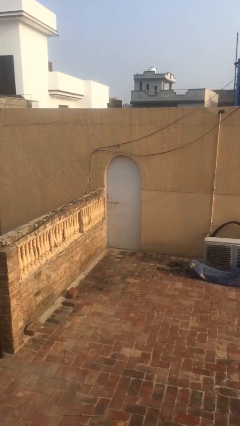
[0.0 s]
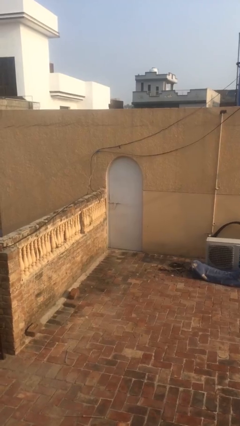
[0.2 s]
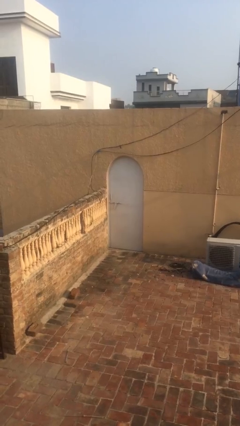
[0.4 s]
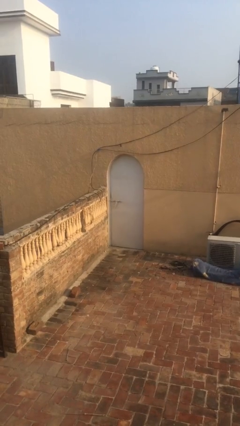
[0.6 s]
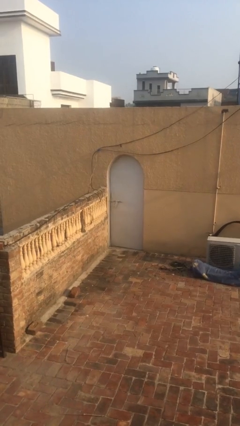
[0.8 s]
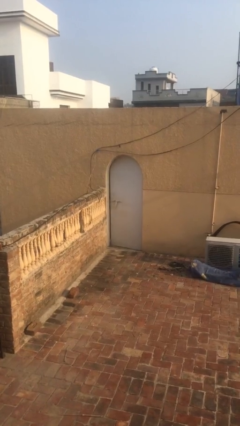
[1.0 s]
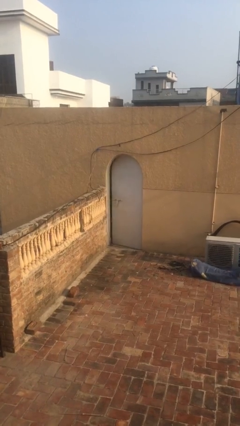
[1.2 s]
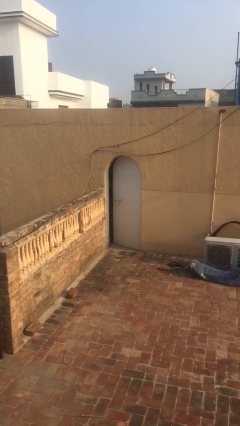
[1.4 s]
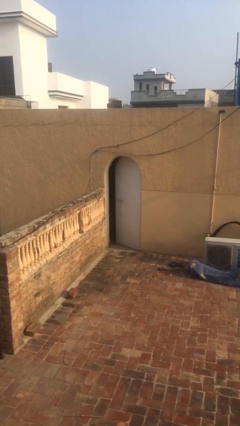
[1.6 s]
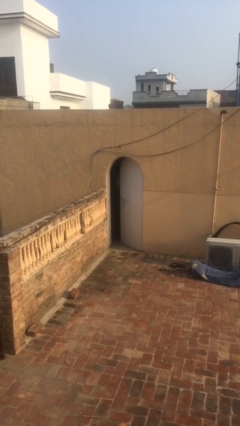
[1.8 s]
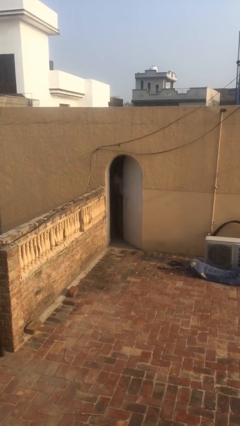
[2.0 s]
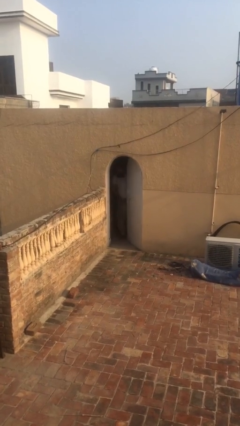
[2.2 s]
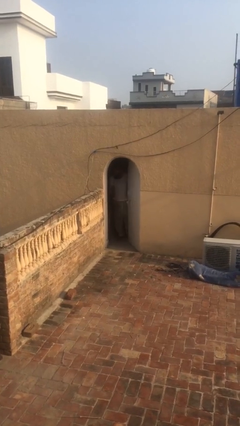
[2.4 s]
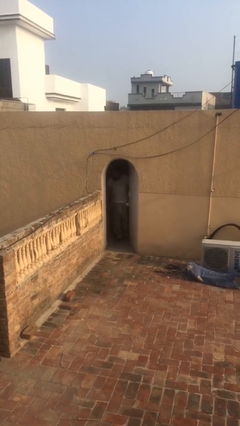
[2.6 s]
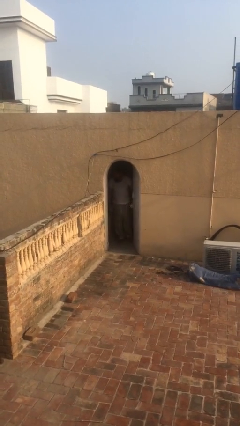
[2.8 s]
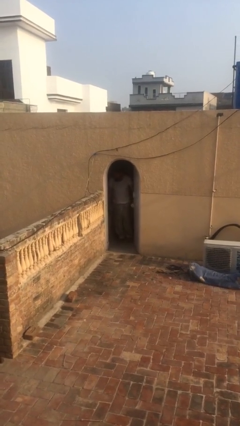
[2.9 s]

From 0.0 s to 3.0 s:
person opens facility door

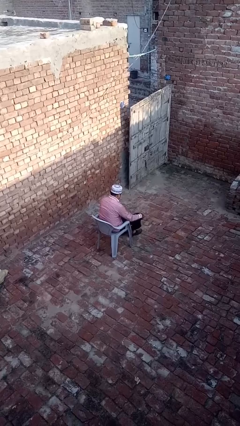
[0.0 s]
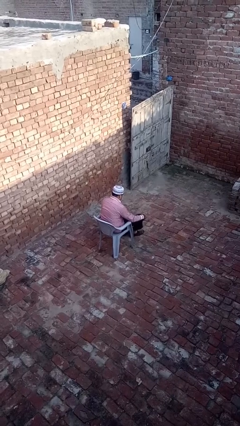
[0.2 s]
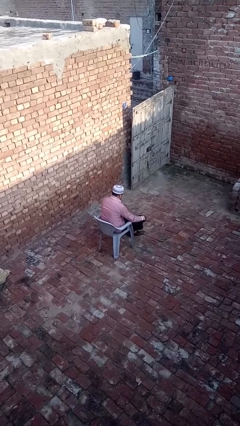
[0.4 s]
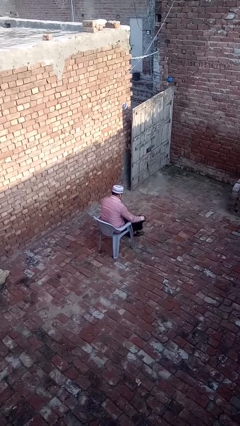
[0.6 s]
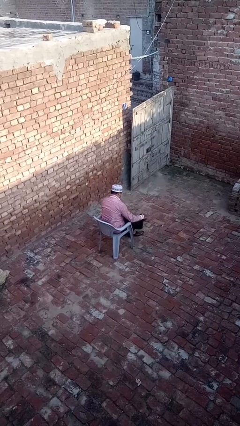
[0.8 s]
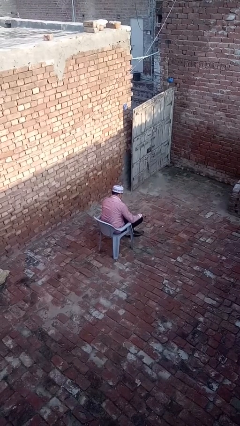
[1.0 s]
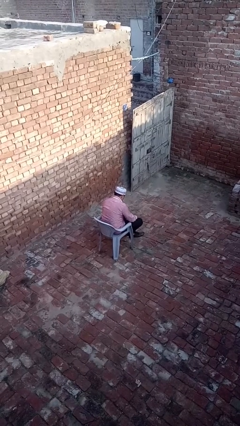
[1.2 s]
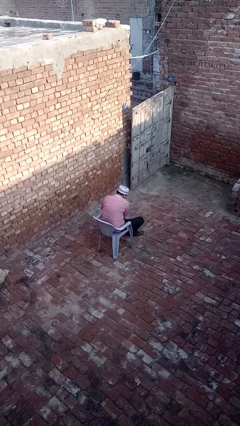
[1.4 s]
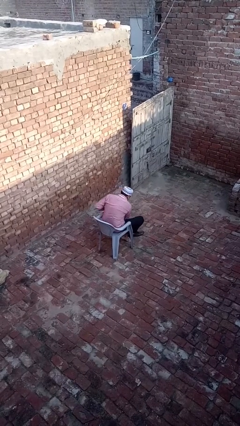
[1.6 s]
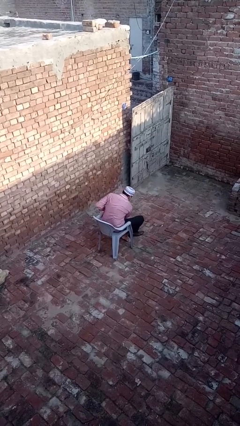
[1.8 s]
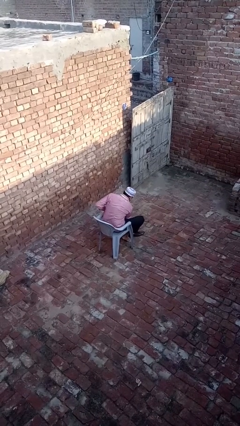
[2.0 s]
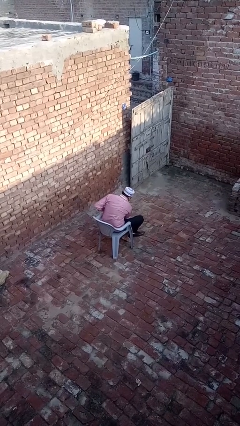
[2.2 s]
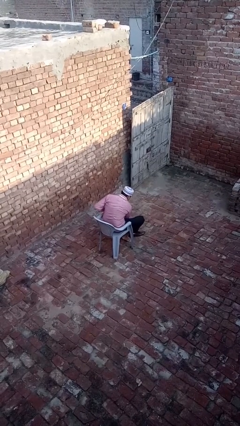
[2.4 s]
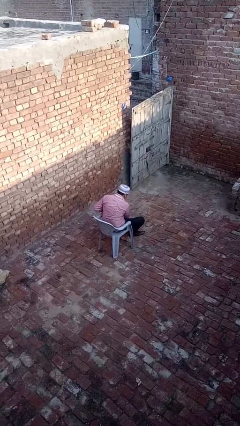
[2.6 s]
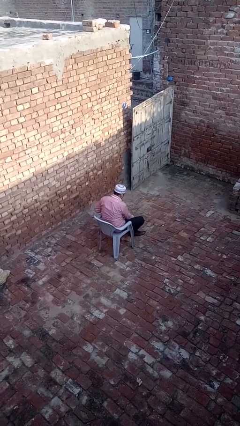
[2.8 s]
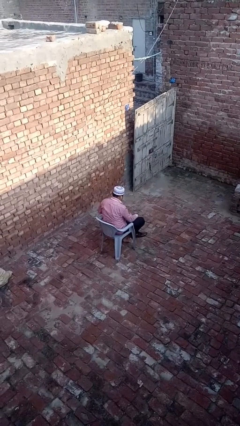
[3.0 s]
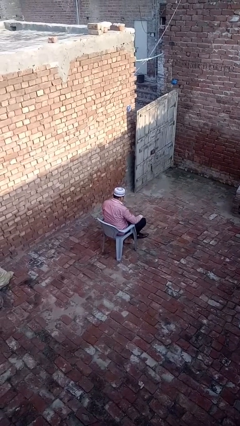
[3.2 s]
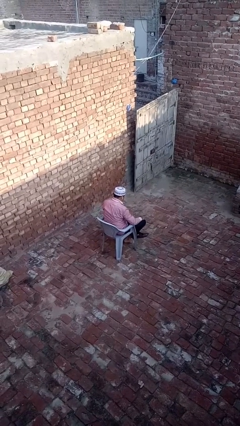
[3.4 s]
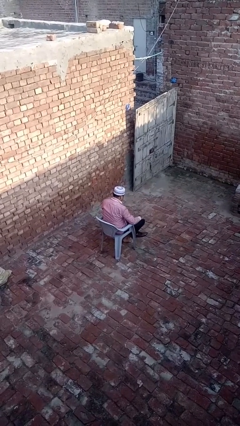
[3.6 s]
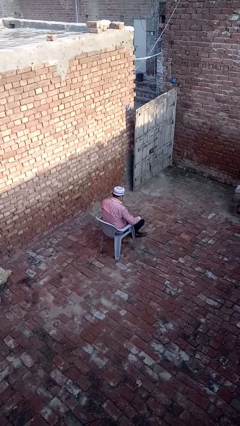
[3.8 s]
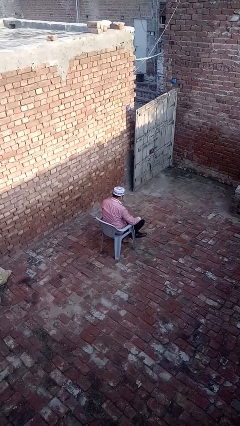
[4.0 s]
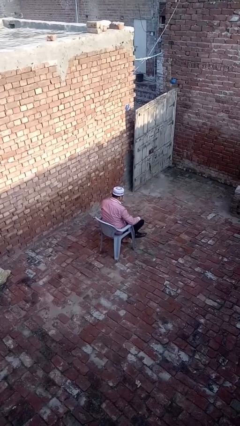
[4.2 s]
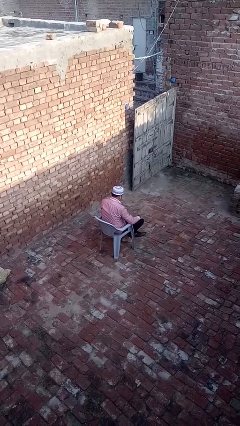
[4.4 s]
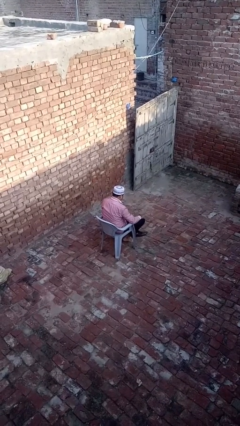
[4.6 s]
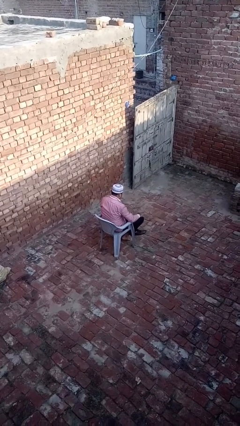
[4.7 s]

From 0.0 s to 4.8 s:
person takes off shoes

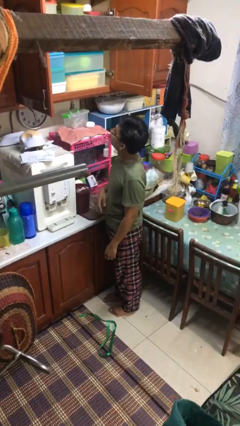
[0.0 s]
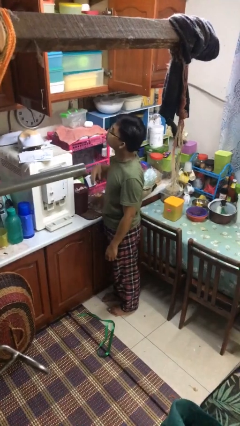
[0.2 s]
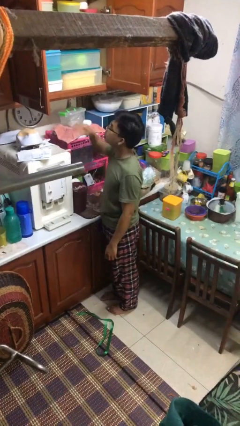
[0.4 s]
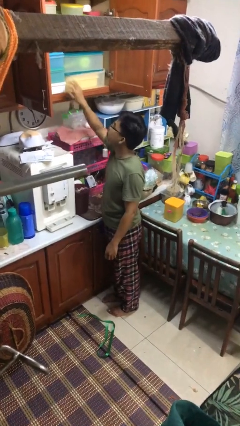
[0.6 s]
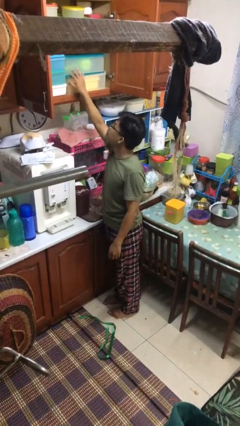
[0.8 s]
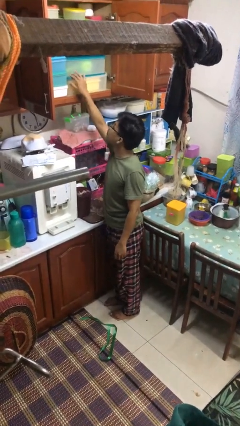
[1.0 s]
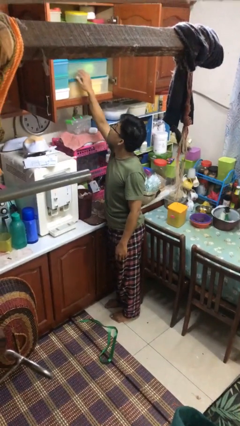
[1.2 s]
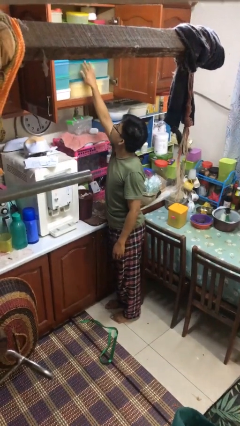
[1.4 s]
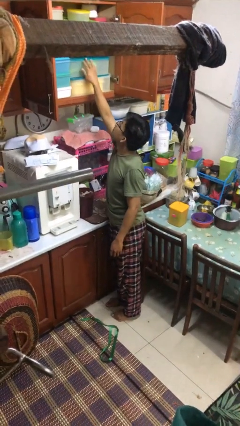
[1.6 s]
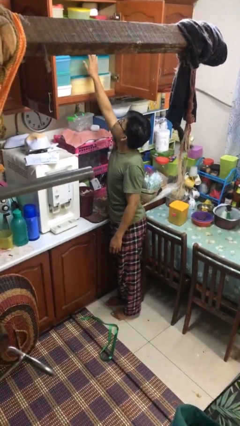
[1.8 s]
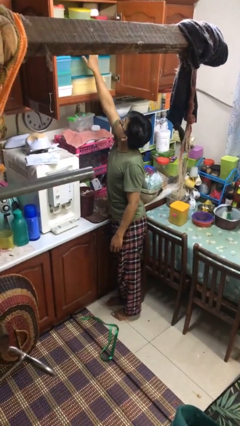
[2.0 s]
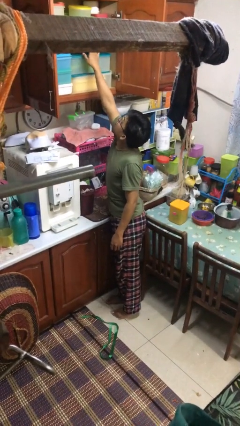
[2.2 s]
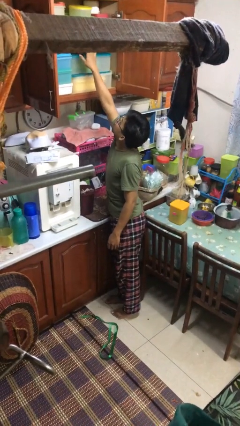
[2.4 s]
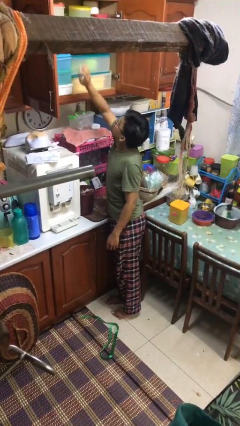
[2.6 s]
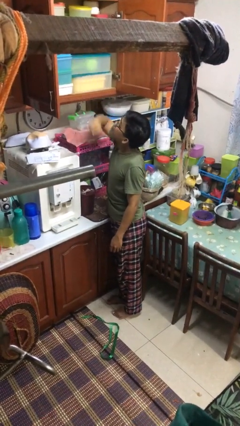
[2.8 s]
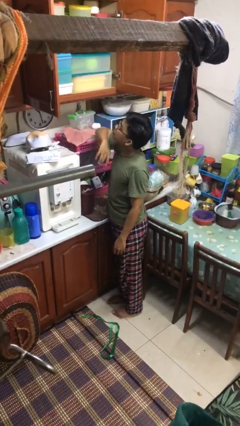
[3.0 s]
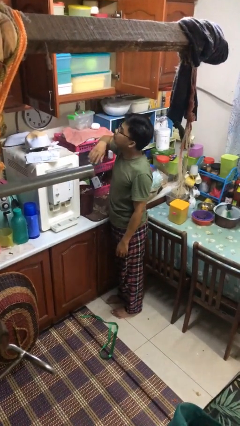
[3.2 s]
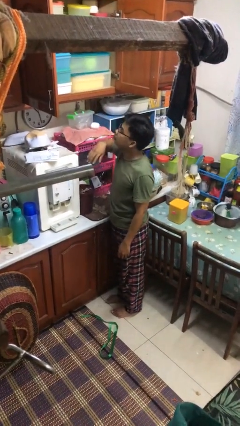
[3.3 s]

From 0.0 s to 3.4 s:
person searches in kitchen drawer

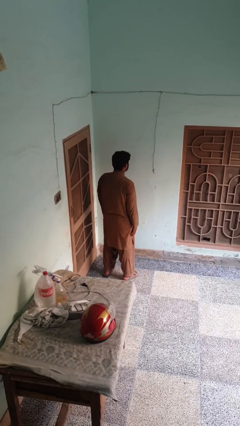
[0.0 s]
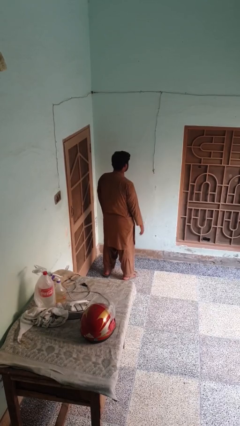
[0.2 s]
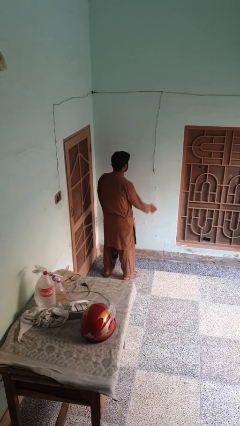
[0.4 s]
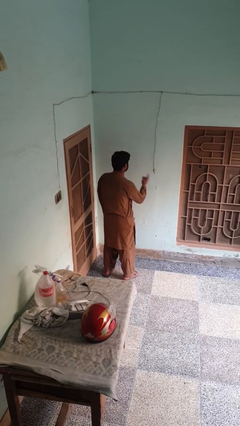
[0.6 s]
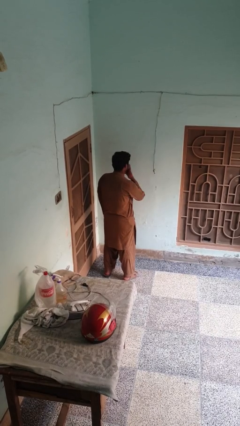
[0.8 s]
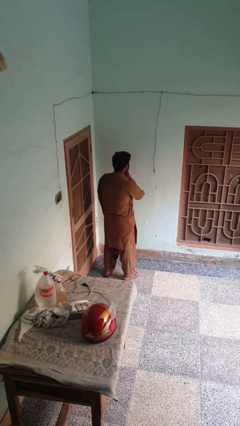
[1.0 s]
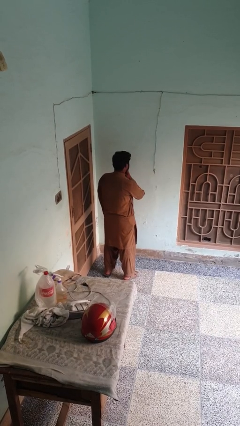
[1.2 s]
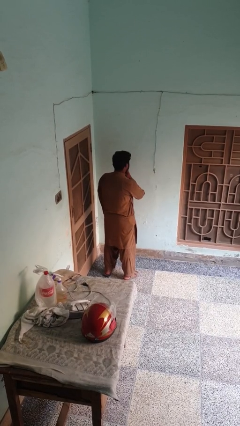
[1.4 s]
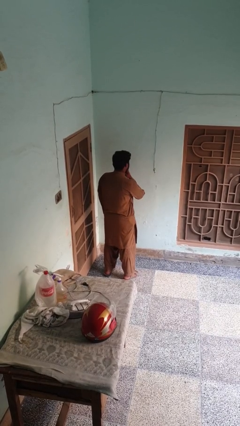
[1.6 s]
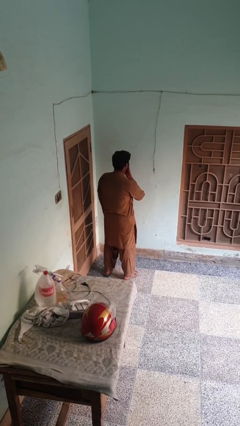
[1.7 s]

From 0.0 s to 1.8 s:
person gestures be quiet

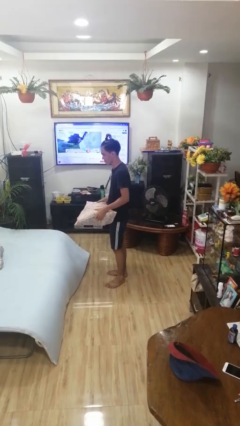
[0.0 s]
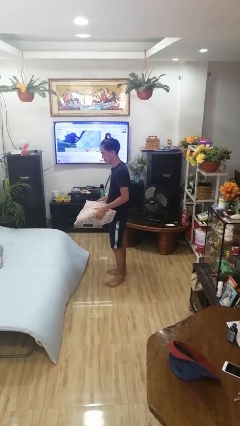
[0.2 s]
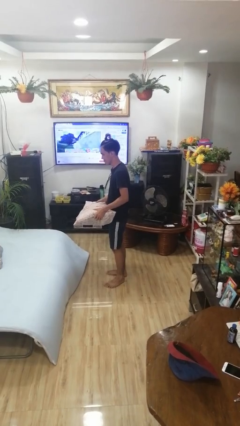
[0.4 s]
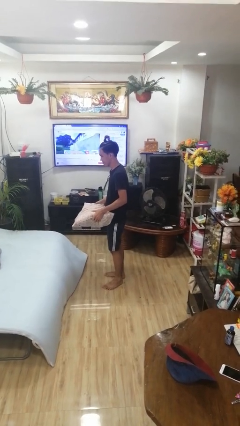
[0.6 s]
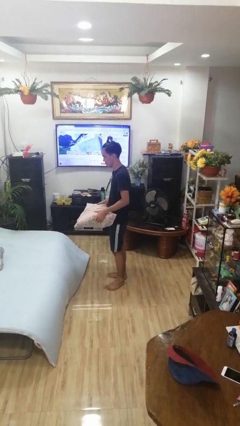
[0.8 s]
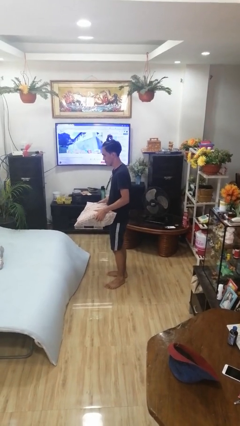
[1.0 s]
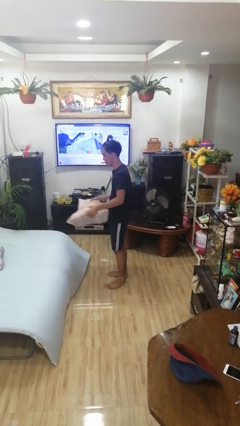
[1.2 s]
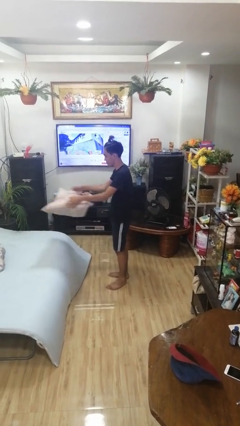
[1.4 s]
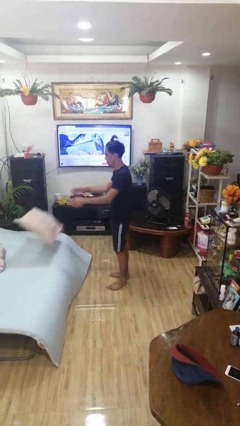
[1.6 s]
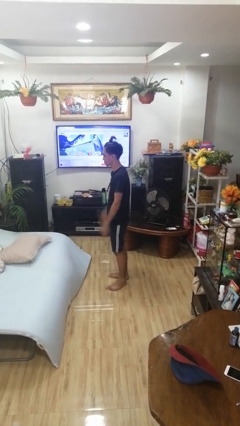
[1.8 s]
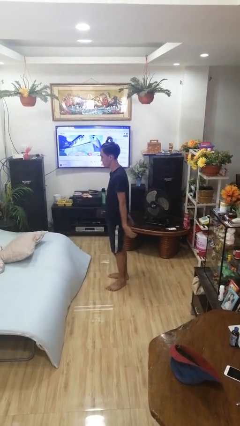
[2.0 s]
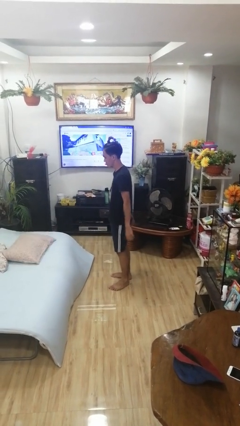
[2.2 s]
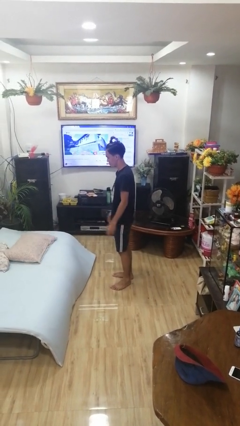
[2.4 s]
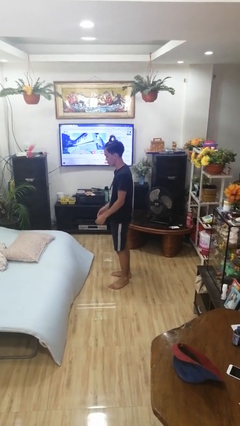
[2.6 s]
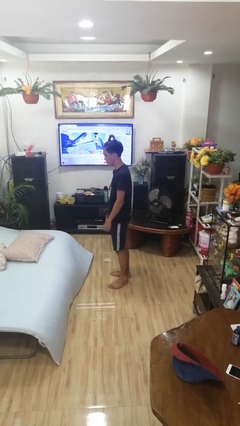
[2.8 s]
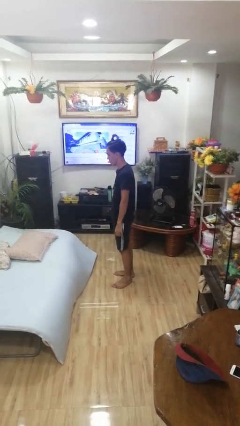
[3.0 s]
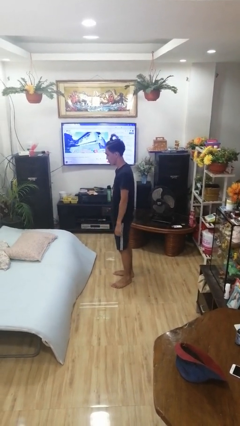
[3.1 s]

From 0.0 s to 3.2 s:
person throws object on bed

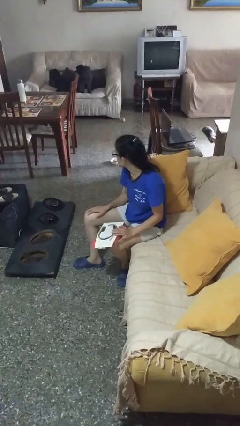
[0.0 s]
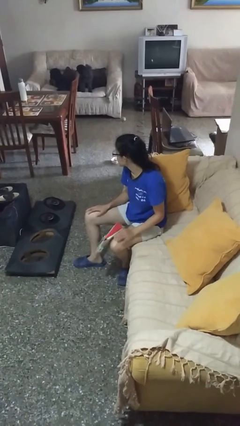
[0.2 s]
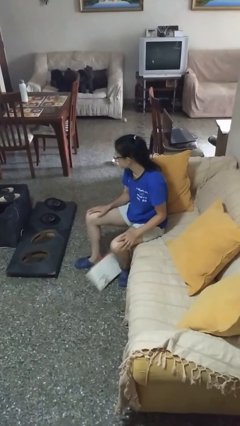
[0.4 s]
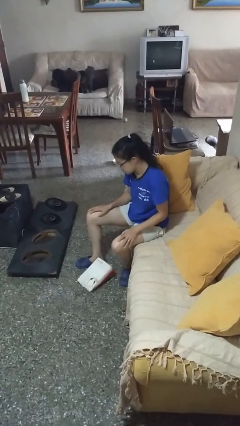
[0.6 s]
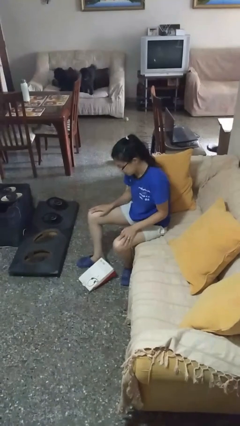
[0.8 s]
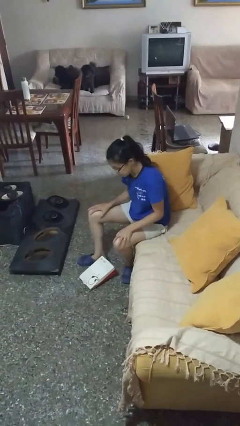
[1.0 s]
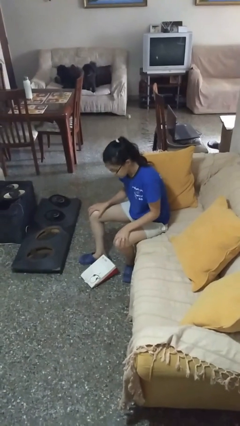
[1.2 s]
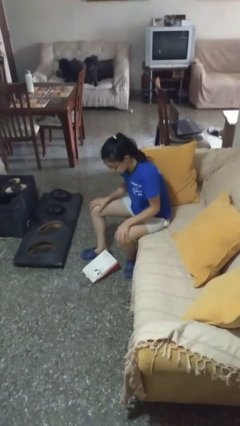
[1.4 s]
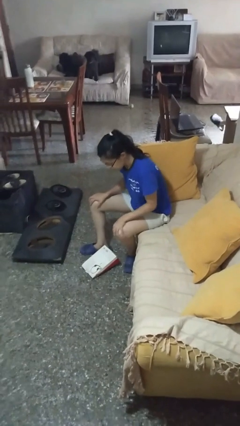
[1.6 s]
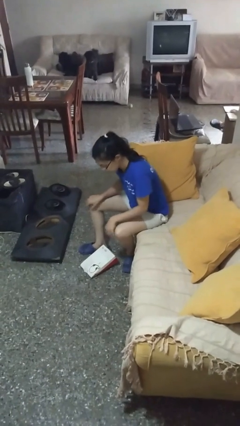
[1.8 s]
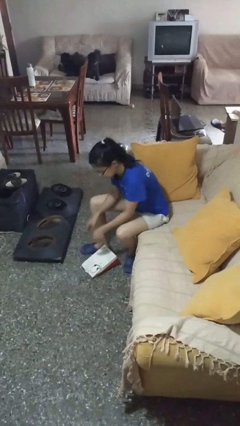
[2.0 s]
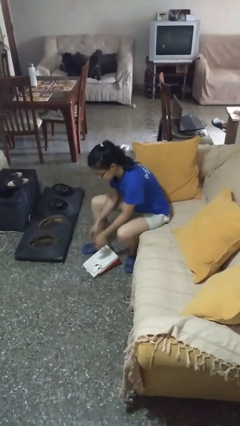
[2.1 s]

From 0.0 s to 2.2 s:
person drops object
